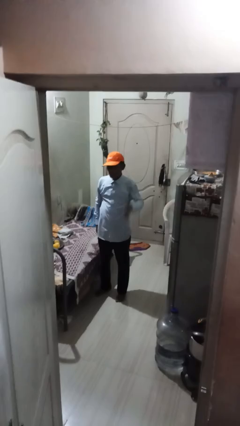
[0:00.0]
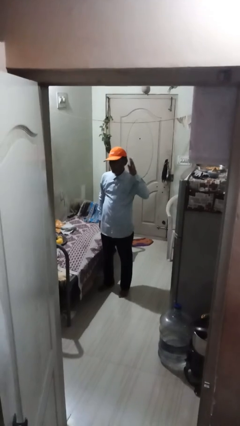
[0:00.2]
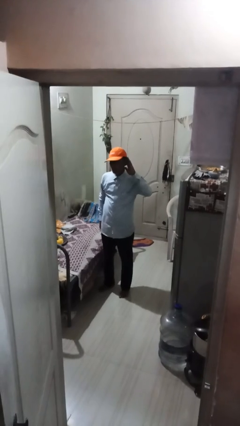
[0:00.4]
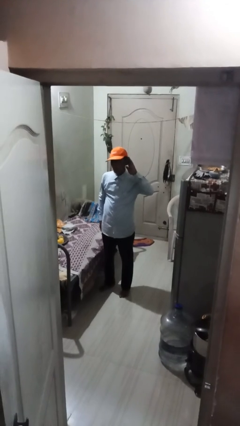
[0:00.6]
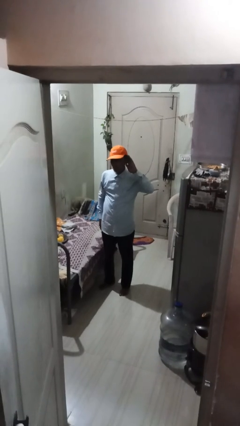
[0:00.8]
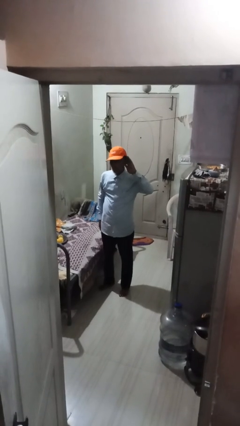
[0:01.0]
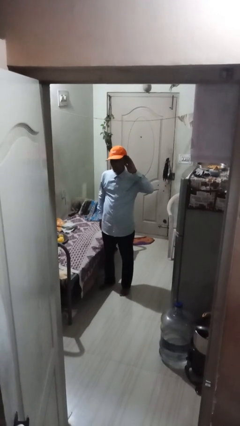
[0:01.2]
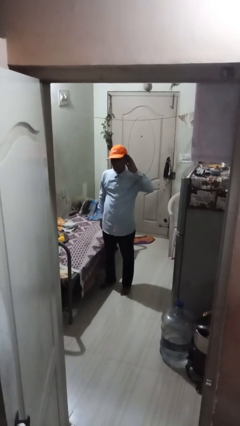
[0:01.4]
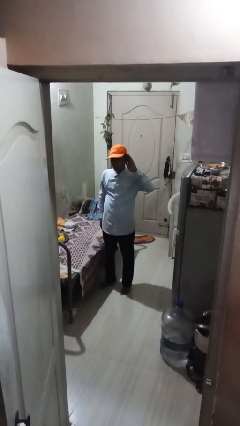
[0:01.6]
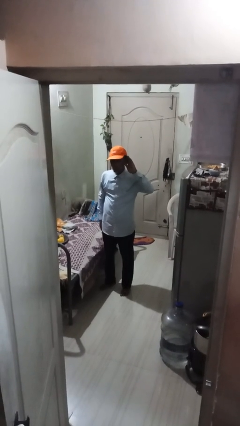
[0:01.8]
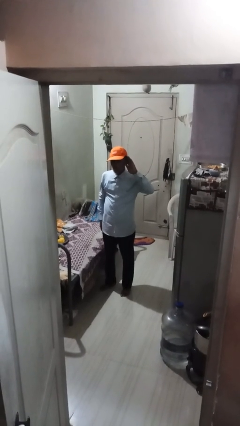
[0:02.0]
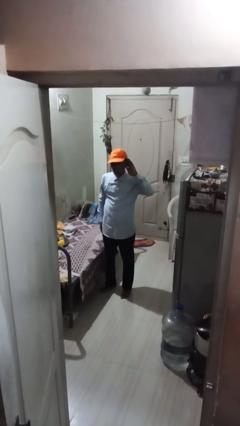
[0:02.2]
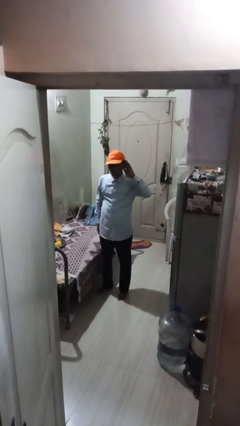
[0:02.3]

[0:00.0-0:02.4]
person gestures listen closely

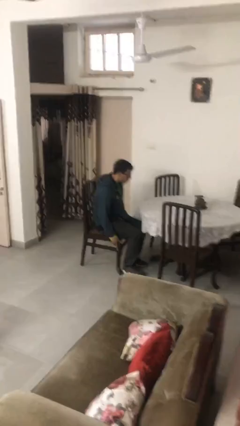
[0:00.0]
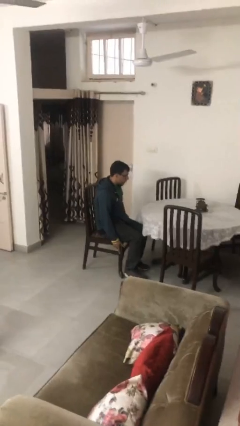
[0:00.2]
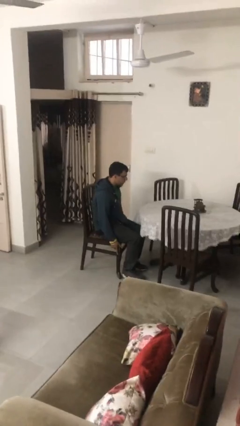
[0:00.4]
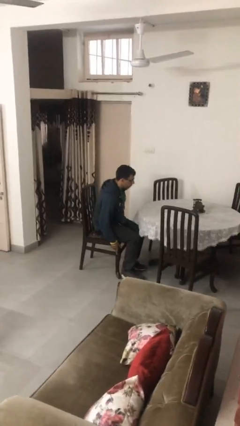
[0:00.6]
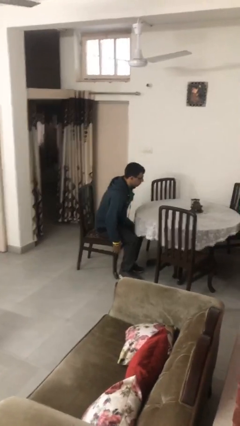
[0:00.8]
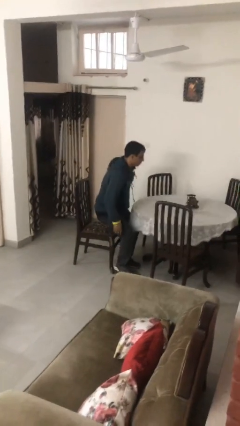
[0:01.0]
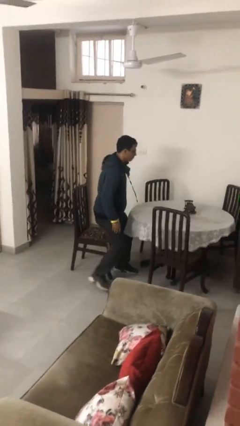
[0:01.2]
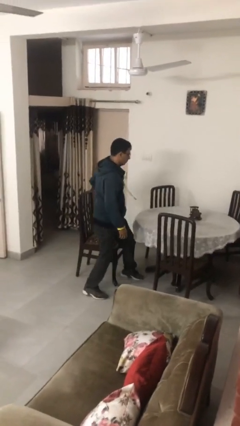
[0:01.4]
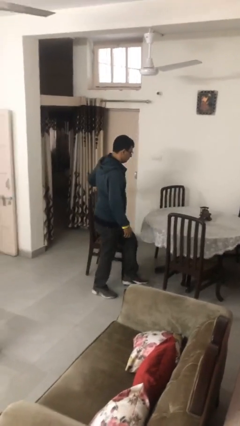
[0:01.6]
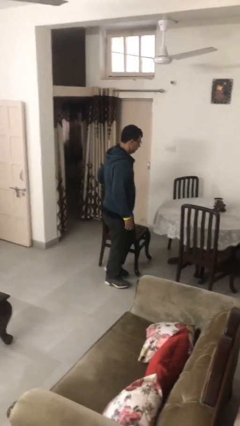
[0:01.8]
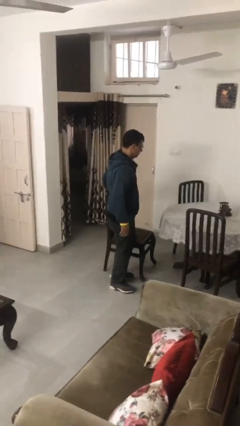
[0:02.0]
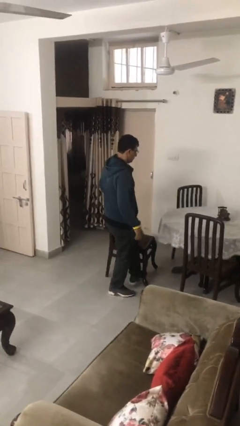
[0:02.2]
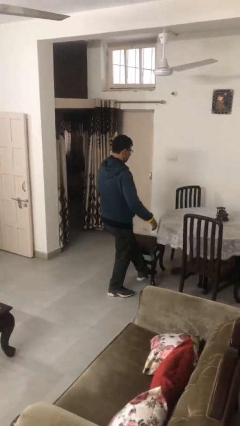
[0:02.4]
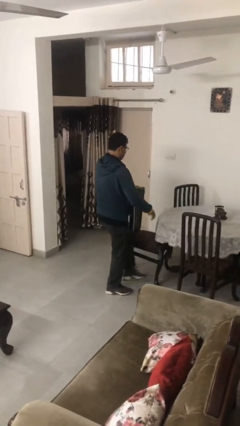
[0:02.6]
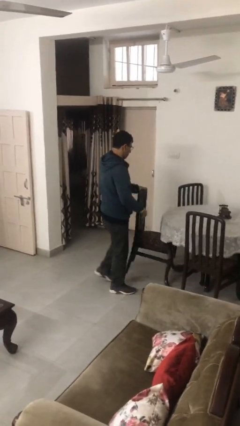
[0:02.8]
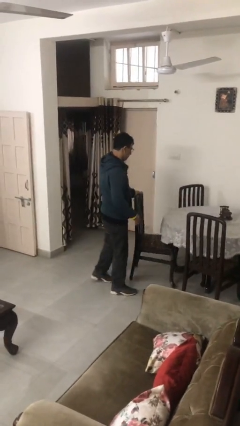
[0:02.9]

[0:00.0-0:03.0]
person stands up

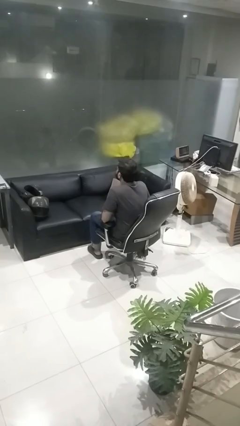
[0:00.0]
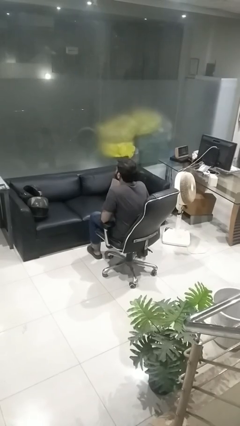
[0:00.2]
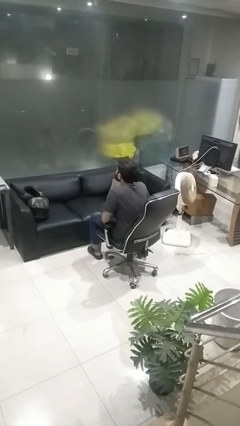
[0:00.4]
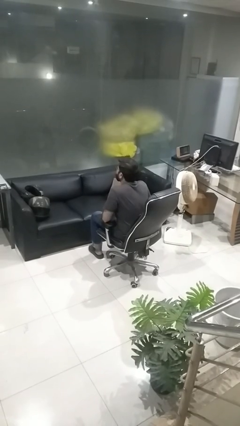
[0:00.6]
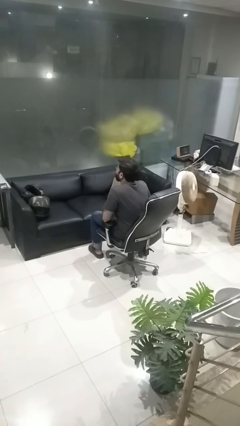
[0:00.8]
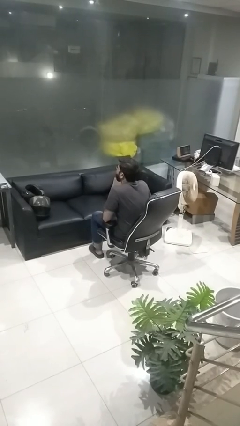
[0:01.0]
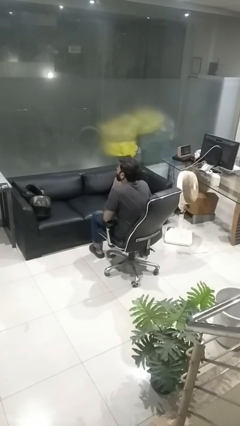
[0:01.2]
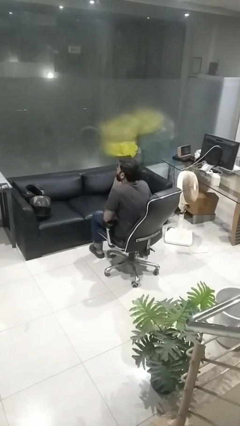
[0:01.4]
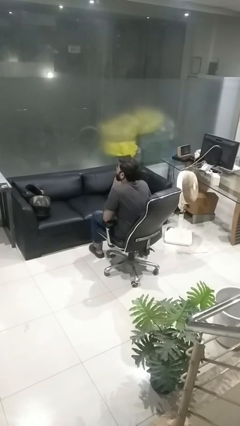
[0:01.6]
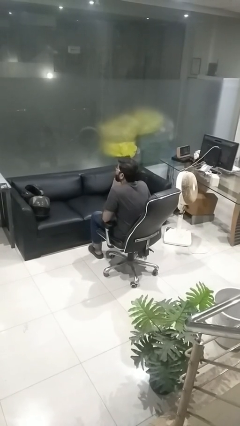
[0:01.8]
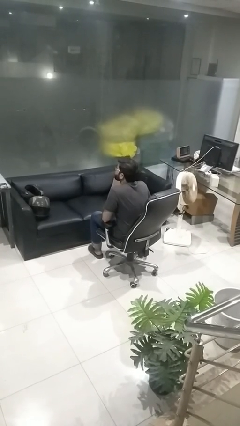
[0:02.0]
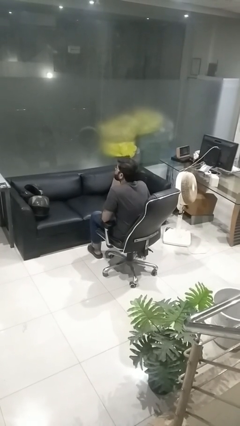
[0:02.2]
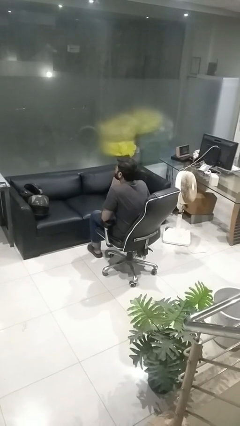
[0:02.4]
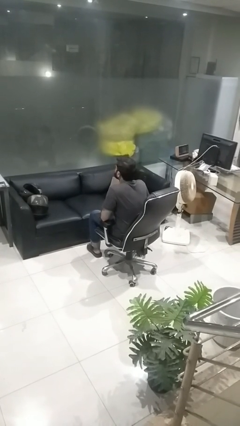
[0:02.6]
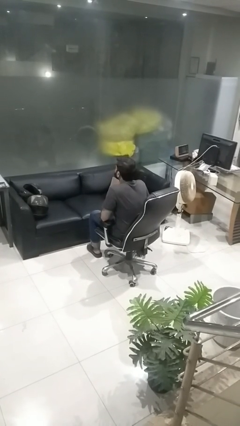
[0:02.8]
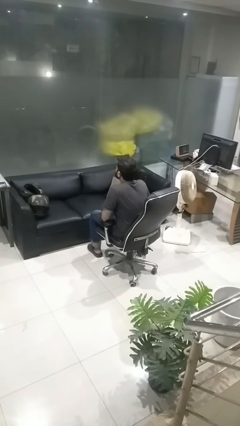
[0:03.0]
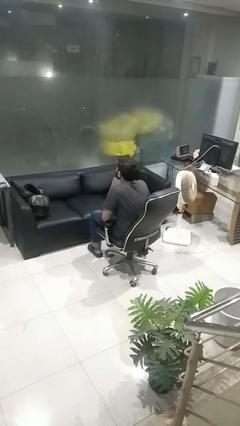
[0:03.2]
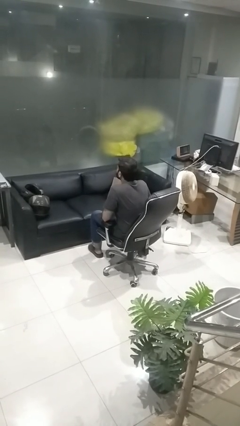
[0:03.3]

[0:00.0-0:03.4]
person sticks out tongue

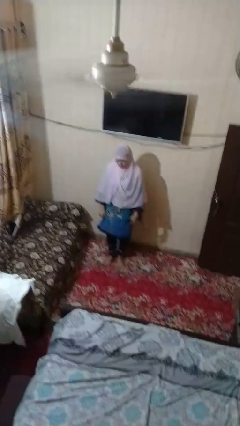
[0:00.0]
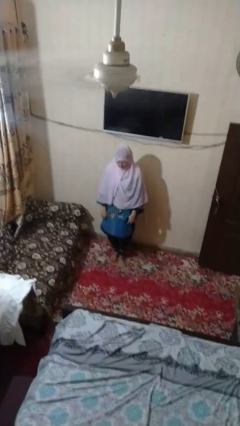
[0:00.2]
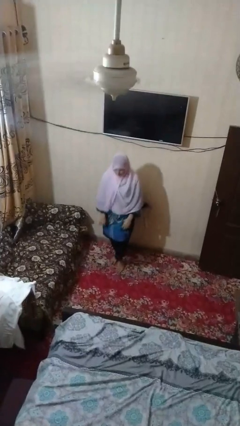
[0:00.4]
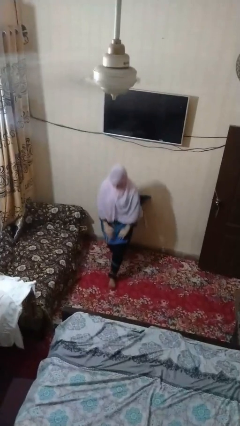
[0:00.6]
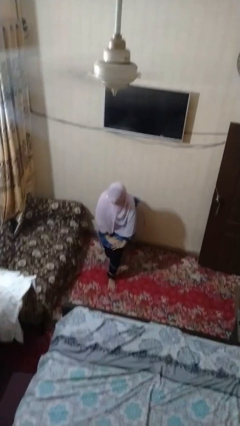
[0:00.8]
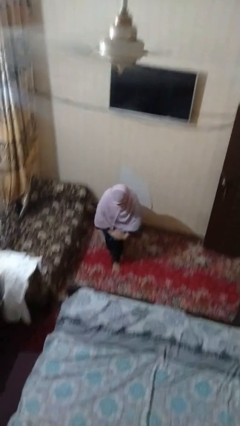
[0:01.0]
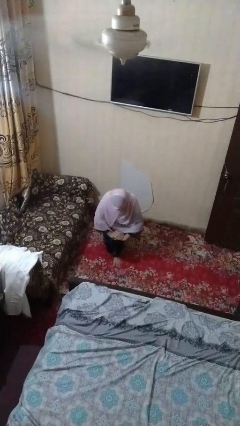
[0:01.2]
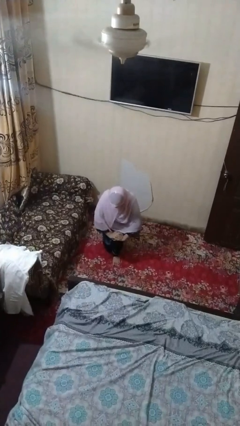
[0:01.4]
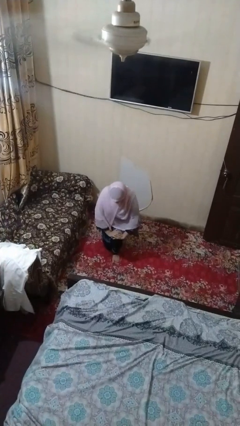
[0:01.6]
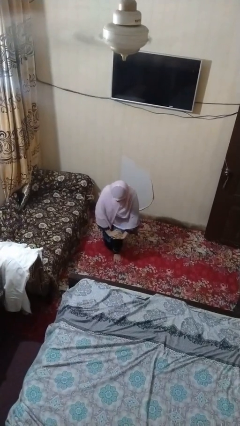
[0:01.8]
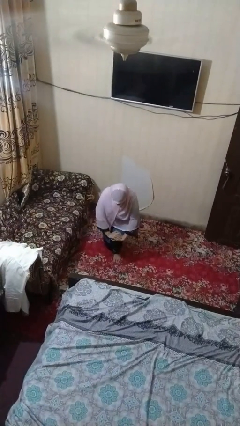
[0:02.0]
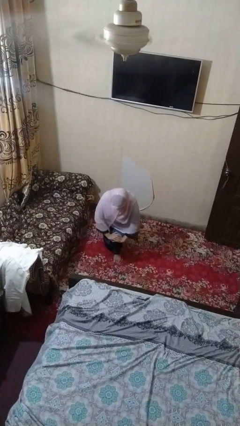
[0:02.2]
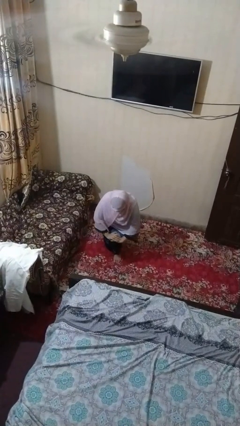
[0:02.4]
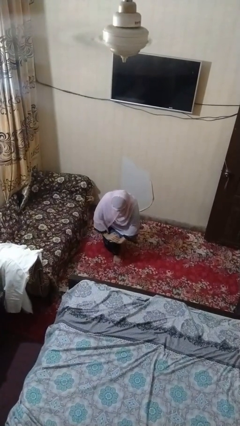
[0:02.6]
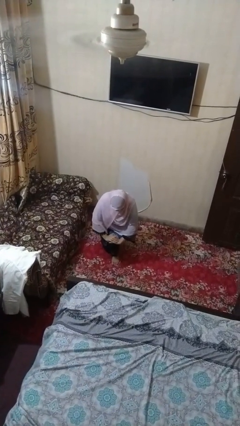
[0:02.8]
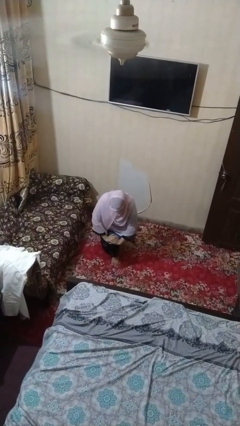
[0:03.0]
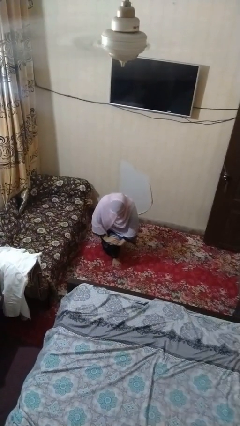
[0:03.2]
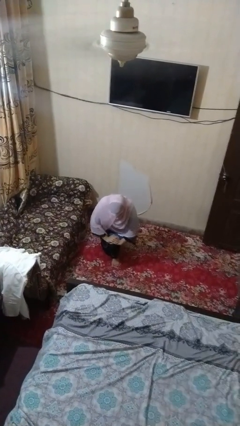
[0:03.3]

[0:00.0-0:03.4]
person exercises with lunges

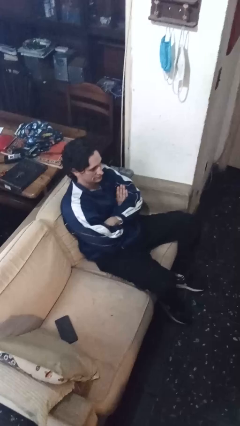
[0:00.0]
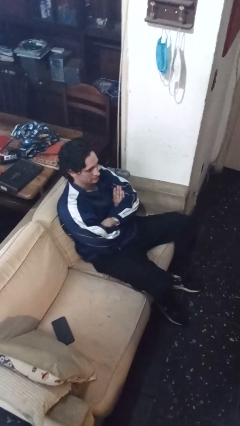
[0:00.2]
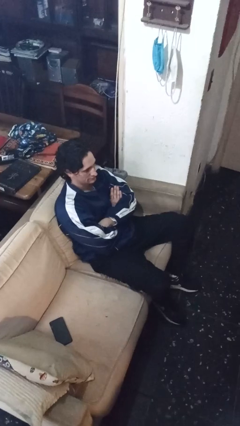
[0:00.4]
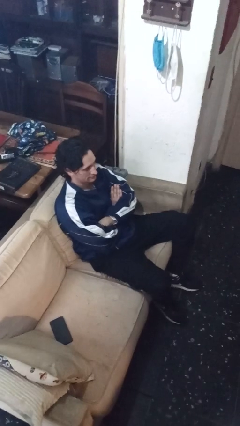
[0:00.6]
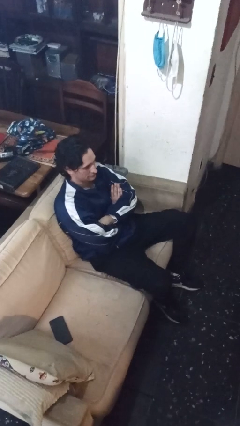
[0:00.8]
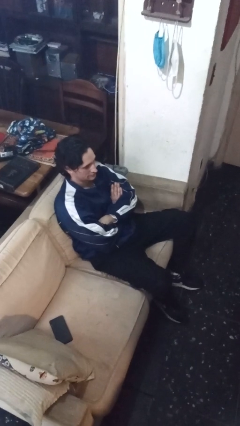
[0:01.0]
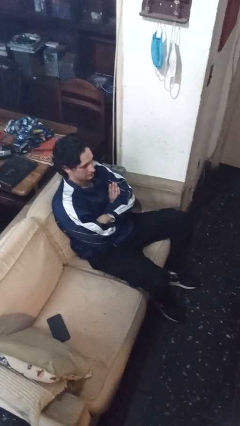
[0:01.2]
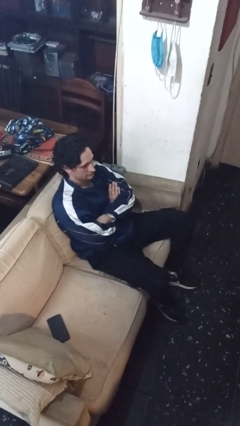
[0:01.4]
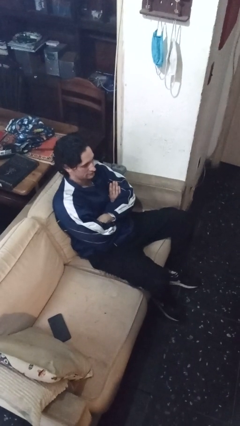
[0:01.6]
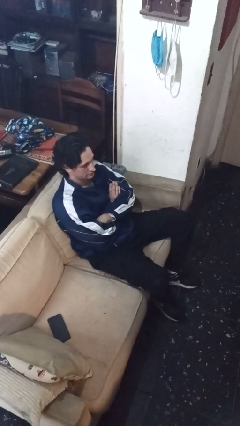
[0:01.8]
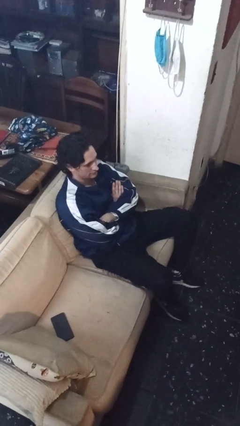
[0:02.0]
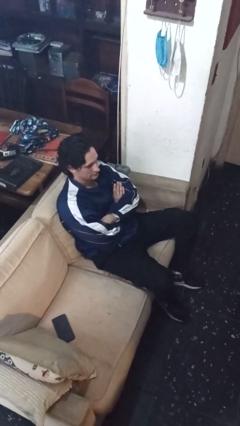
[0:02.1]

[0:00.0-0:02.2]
person crosses arms

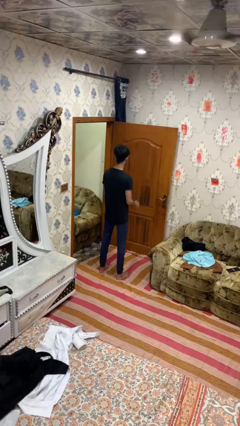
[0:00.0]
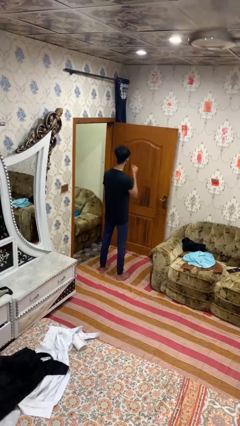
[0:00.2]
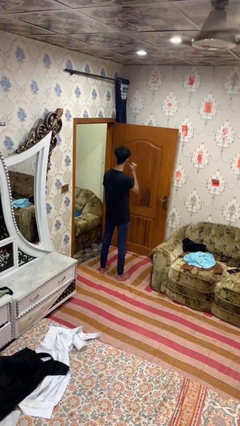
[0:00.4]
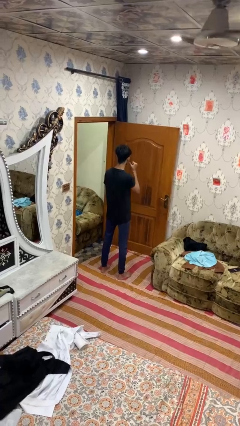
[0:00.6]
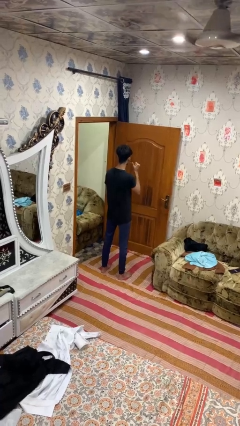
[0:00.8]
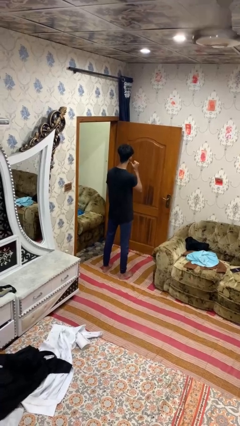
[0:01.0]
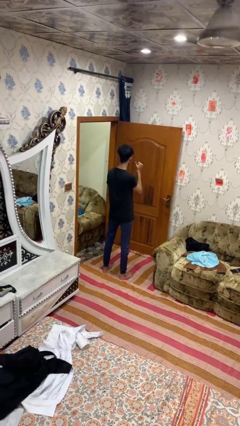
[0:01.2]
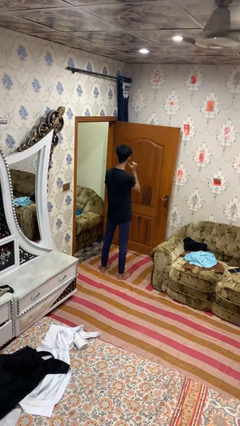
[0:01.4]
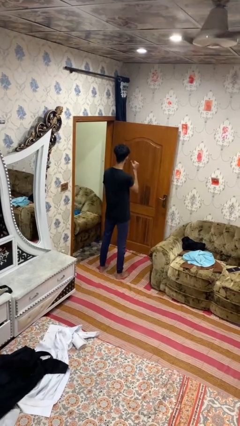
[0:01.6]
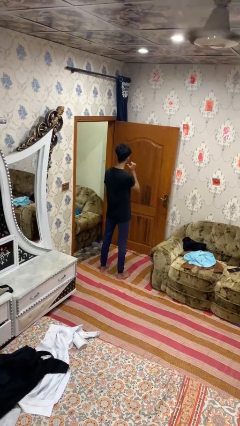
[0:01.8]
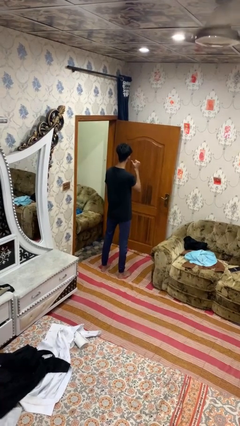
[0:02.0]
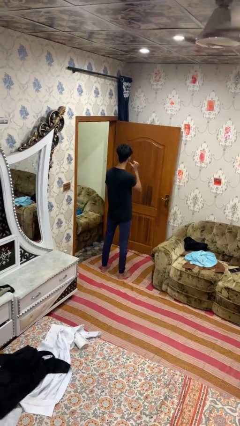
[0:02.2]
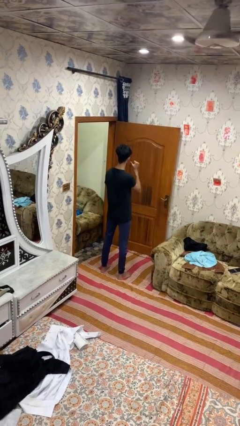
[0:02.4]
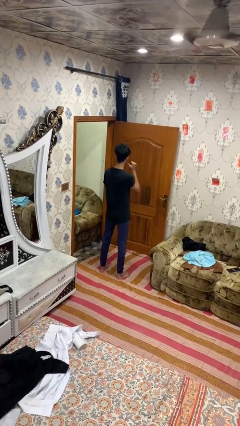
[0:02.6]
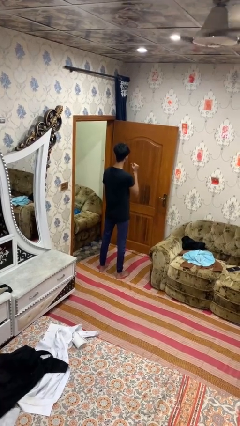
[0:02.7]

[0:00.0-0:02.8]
person gestures behind me

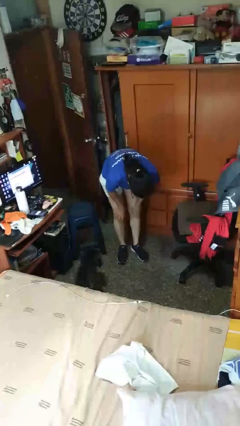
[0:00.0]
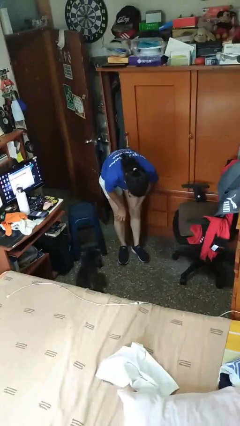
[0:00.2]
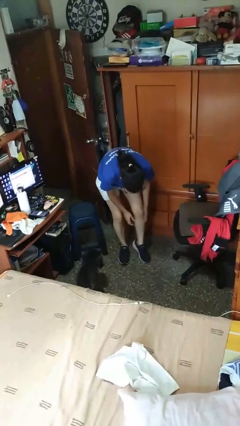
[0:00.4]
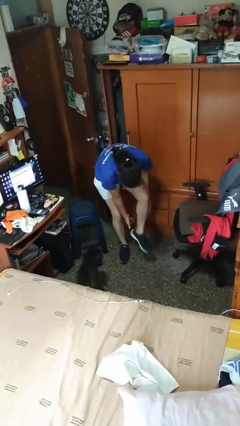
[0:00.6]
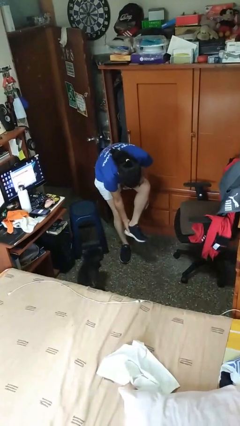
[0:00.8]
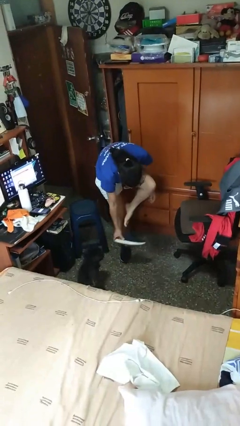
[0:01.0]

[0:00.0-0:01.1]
person takes off shoes
